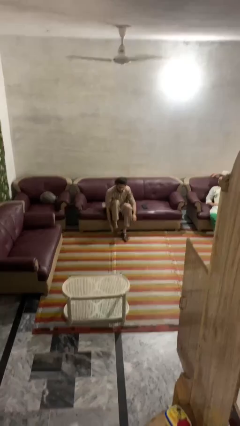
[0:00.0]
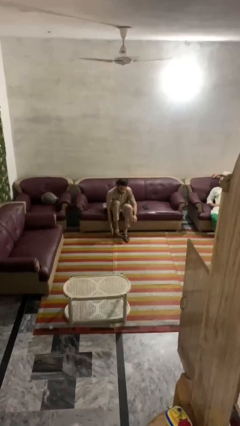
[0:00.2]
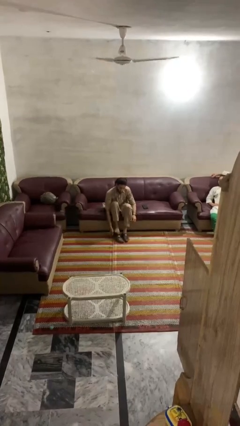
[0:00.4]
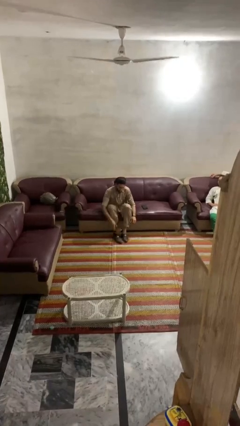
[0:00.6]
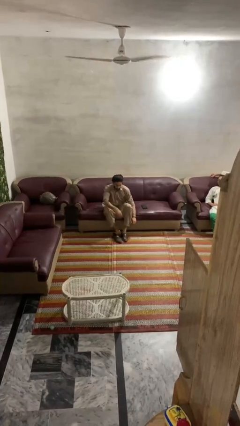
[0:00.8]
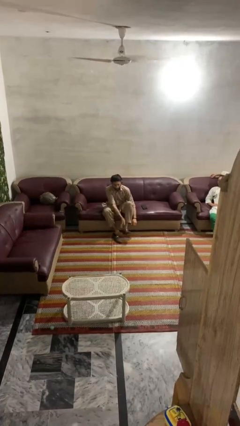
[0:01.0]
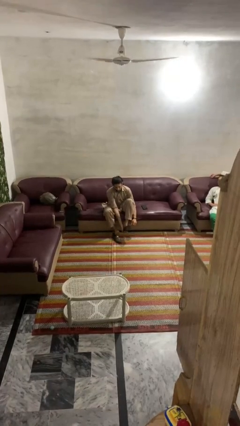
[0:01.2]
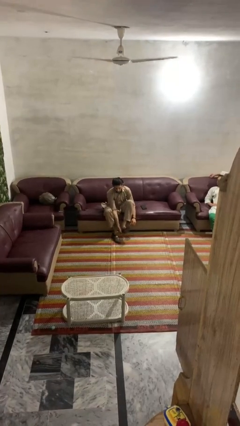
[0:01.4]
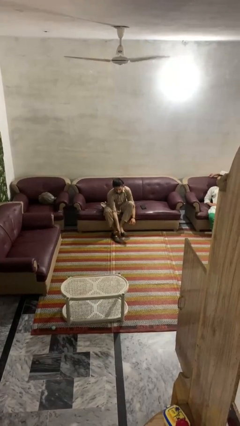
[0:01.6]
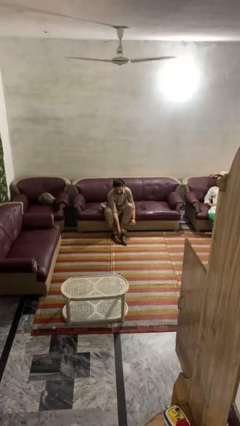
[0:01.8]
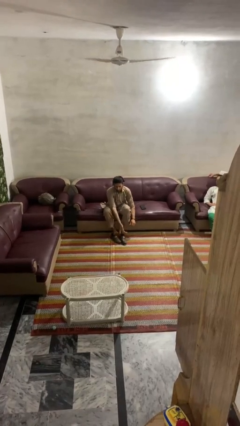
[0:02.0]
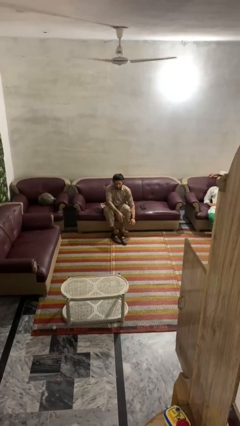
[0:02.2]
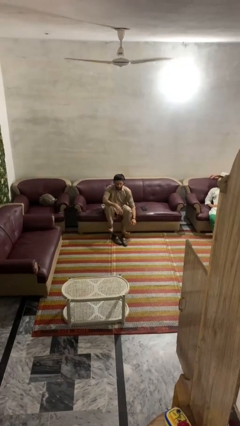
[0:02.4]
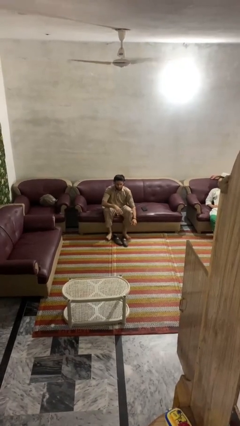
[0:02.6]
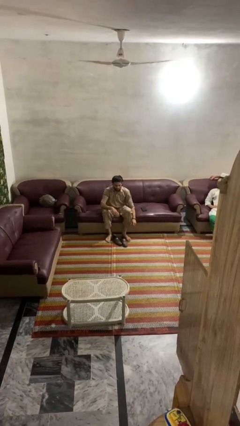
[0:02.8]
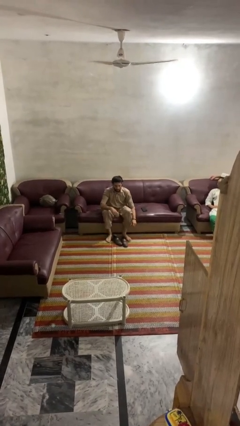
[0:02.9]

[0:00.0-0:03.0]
person takes off shoes

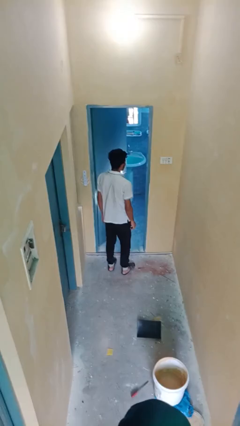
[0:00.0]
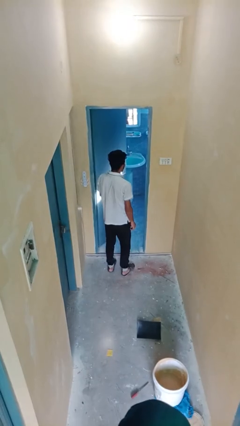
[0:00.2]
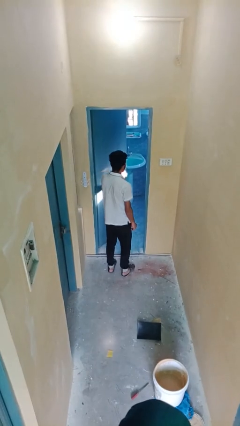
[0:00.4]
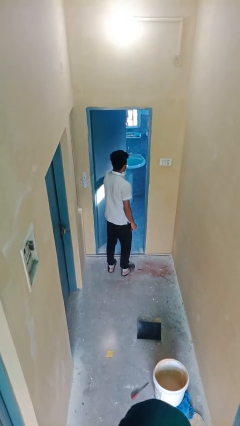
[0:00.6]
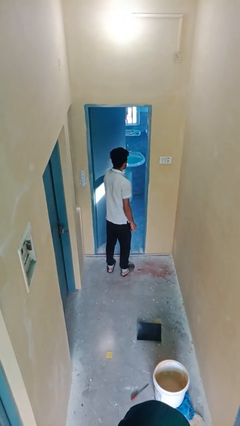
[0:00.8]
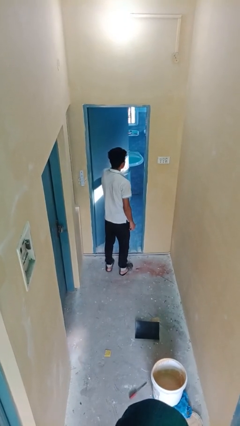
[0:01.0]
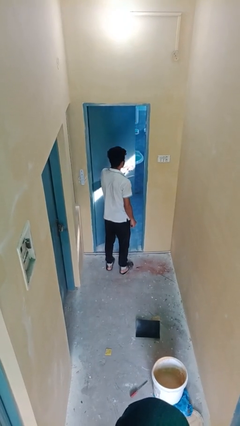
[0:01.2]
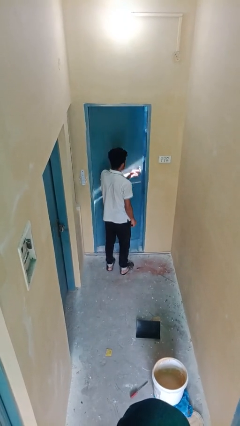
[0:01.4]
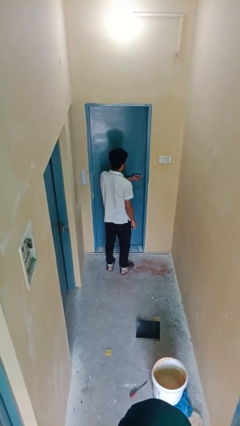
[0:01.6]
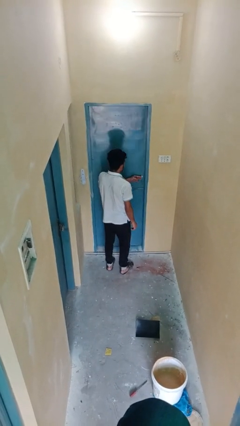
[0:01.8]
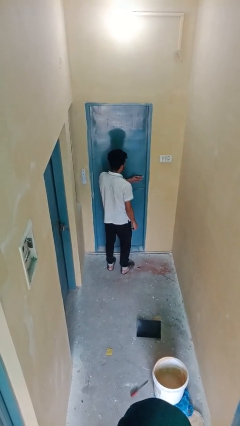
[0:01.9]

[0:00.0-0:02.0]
person closes facility door

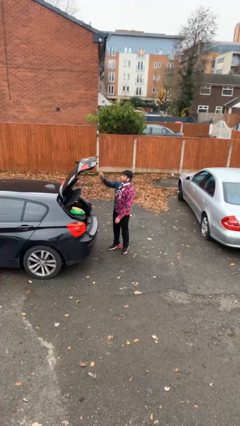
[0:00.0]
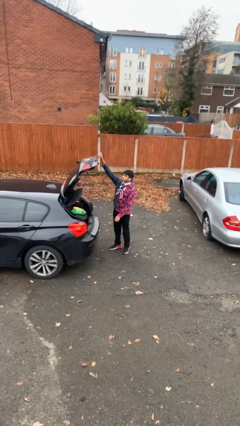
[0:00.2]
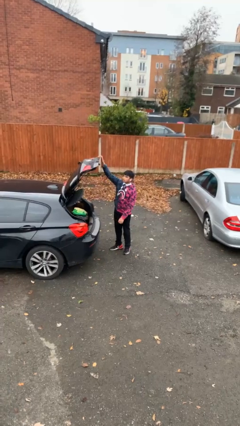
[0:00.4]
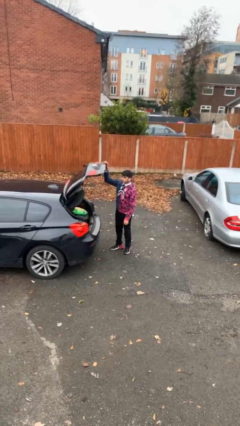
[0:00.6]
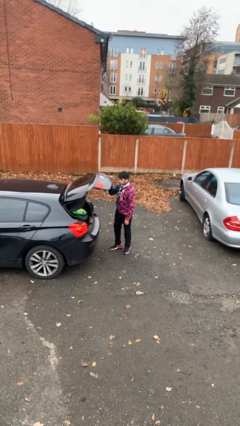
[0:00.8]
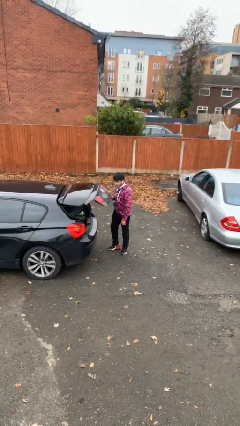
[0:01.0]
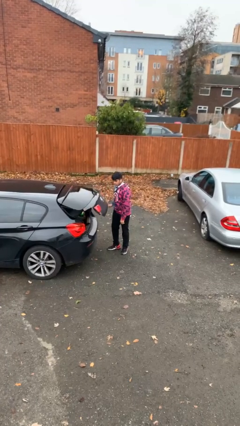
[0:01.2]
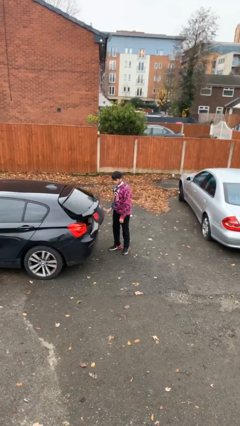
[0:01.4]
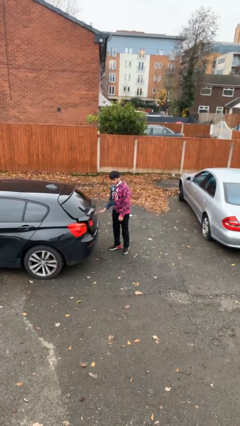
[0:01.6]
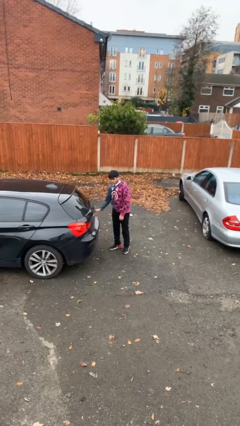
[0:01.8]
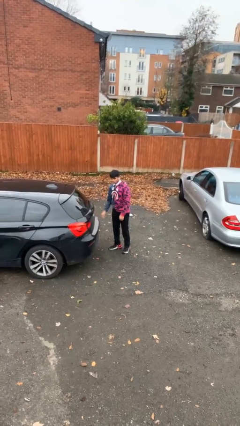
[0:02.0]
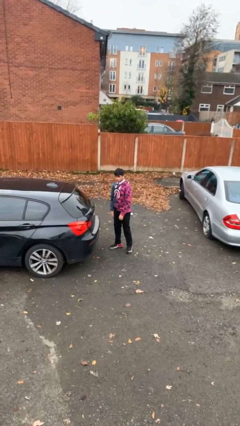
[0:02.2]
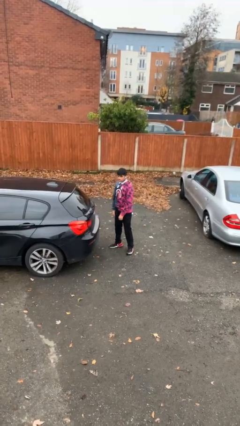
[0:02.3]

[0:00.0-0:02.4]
person closes car trunk

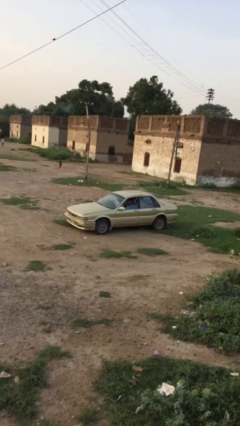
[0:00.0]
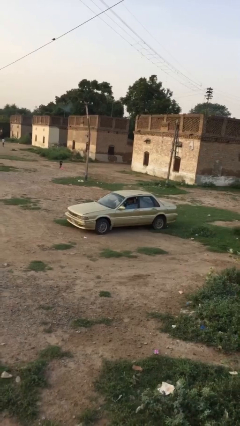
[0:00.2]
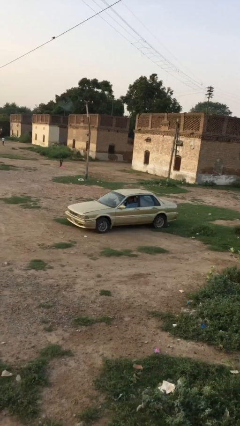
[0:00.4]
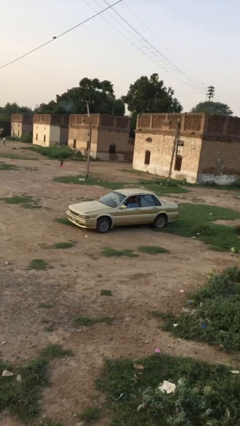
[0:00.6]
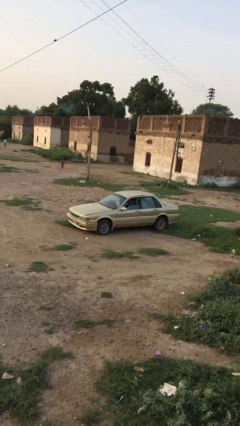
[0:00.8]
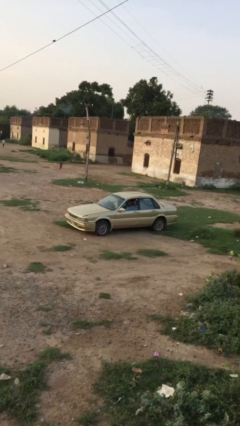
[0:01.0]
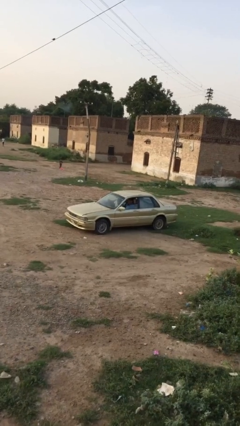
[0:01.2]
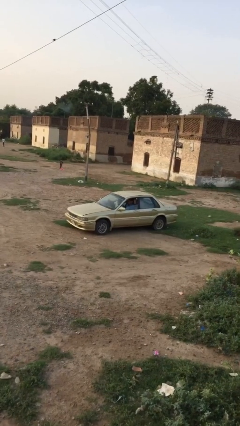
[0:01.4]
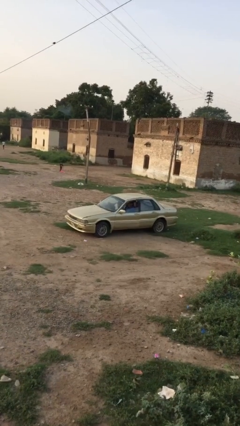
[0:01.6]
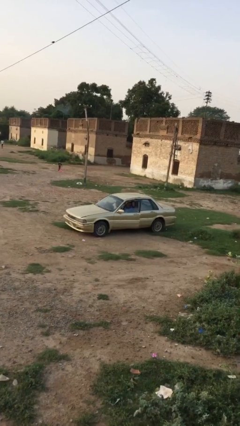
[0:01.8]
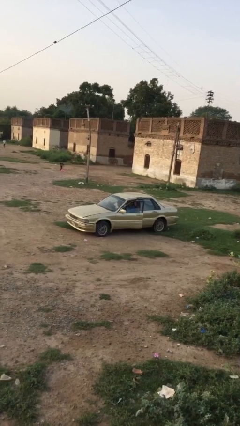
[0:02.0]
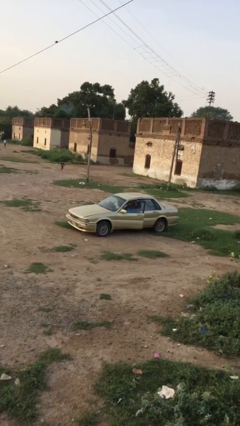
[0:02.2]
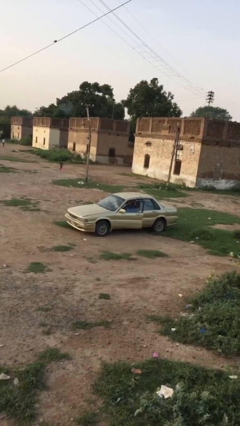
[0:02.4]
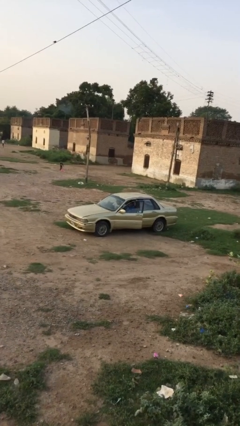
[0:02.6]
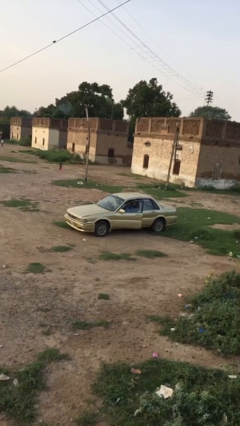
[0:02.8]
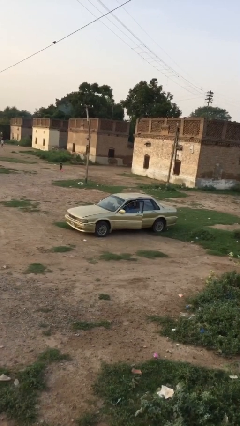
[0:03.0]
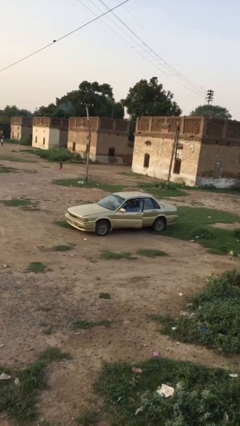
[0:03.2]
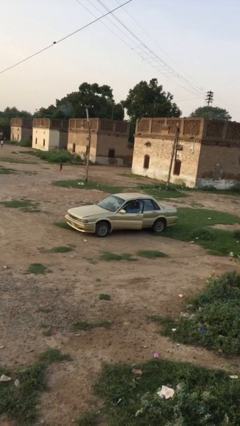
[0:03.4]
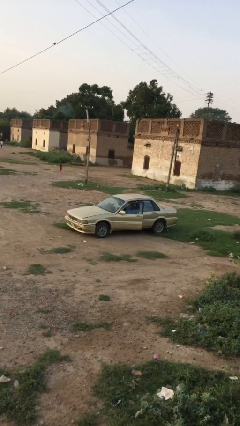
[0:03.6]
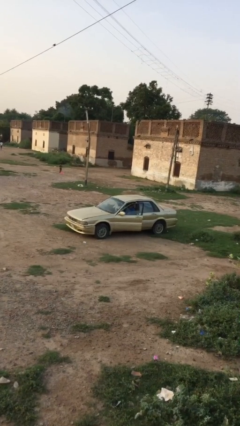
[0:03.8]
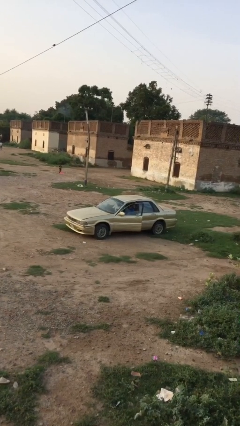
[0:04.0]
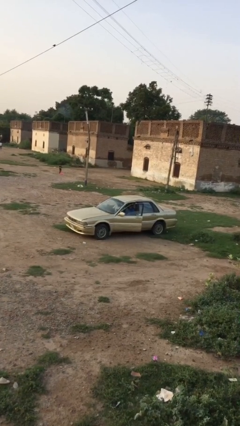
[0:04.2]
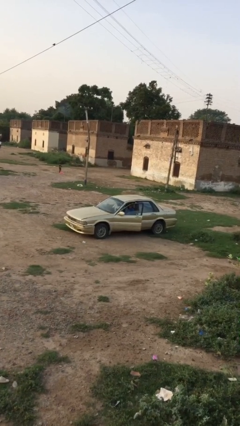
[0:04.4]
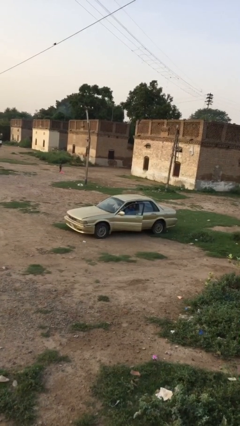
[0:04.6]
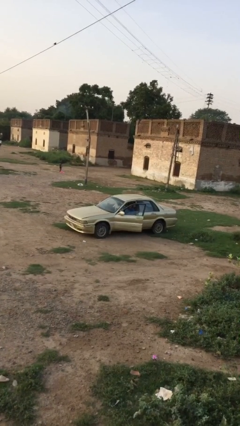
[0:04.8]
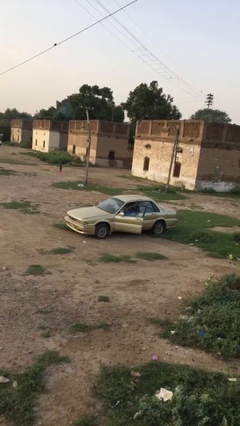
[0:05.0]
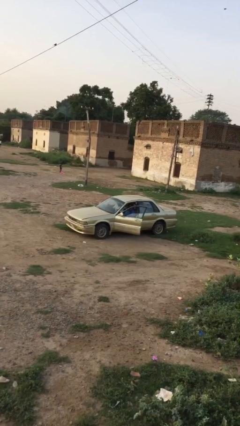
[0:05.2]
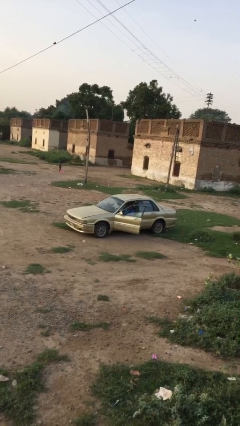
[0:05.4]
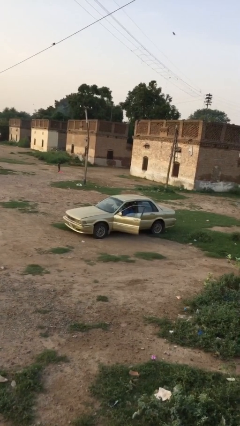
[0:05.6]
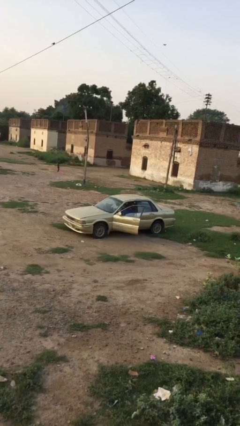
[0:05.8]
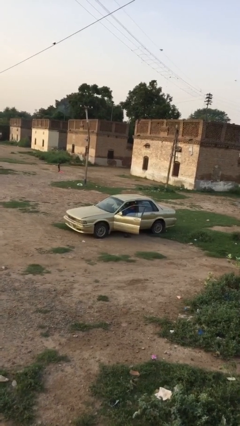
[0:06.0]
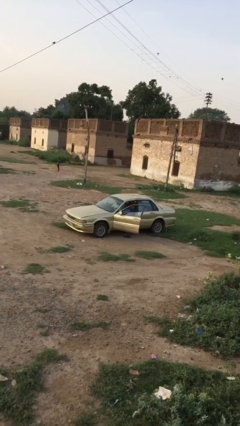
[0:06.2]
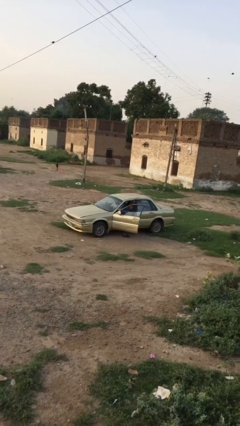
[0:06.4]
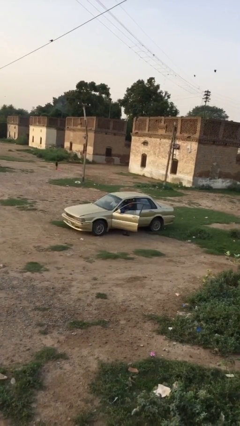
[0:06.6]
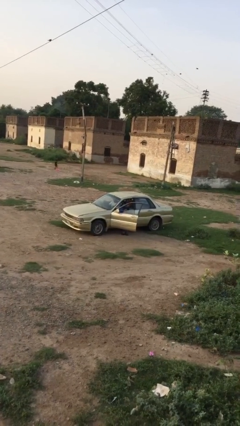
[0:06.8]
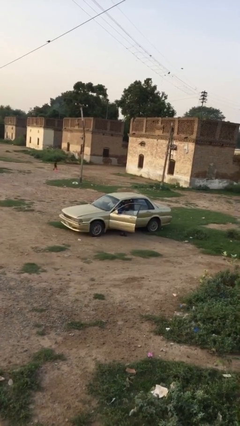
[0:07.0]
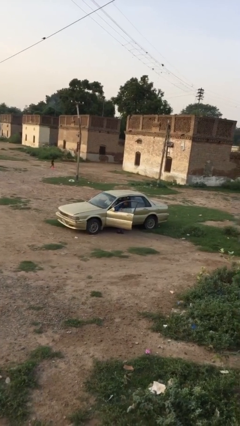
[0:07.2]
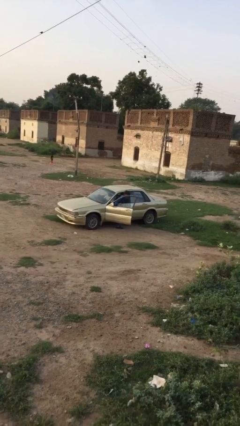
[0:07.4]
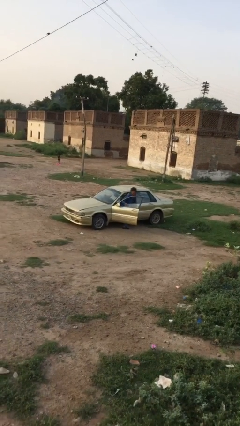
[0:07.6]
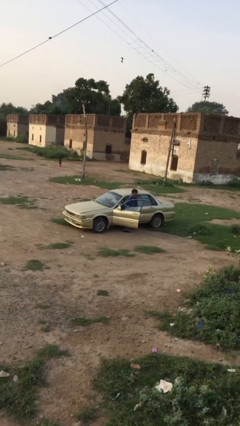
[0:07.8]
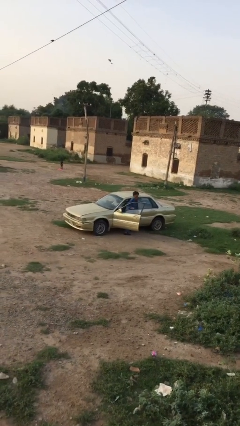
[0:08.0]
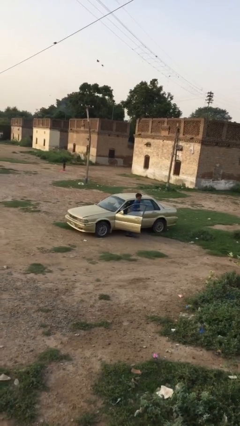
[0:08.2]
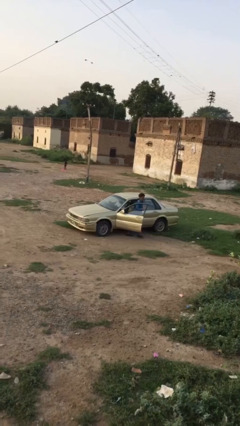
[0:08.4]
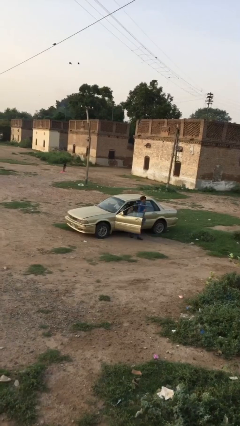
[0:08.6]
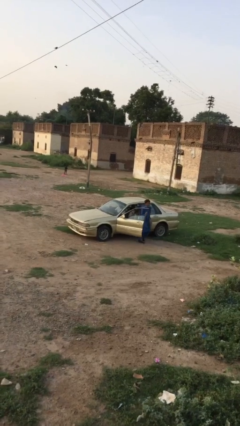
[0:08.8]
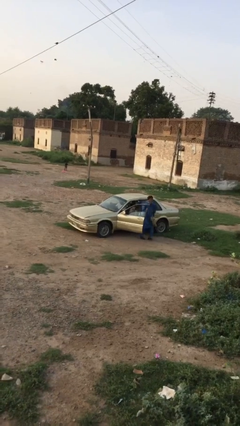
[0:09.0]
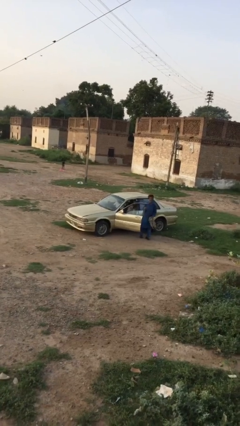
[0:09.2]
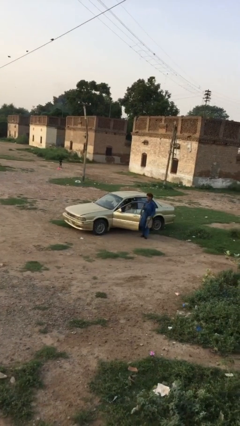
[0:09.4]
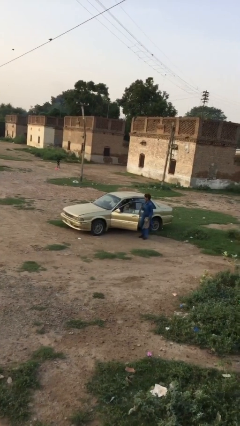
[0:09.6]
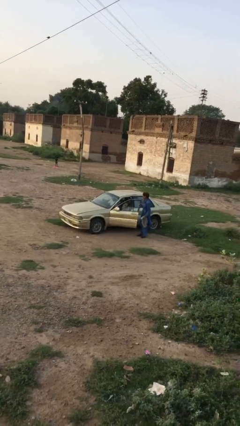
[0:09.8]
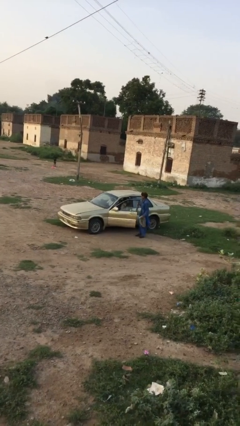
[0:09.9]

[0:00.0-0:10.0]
car drops off person
